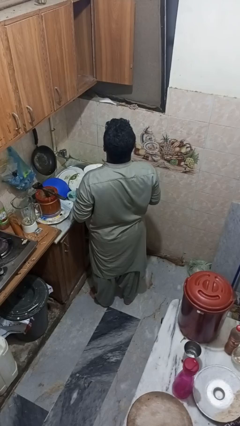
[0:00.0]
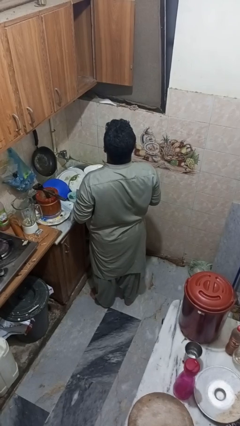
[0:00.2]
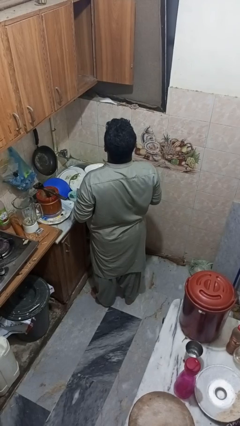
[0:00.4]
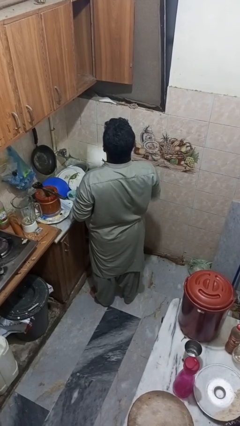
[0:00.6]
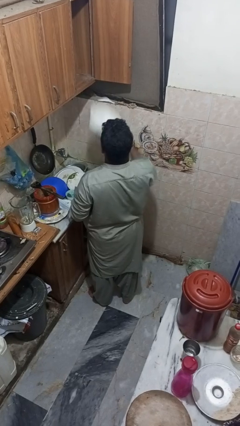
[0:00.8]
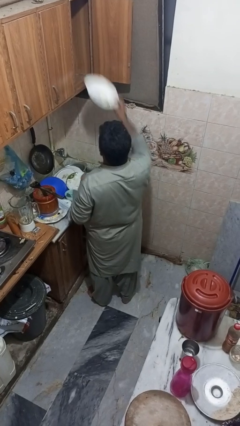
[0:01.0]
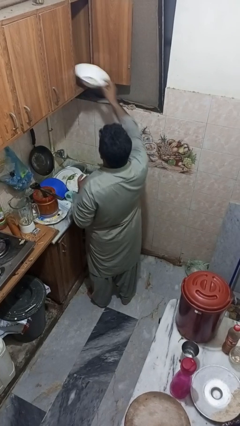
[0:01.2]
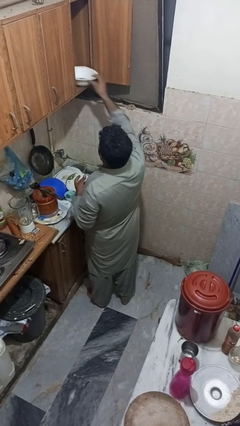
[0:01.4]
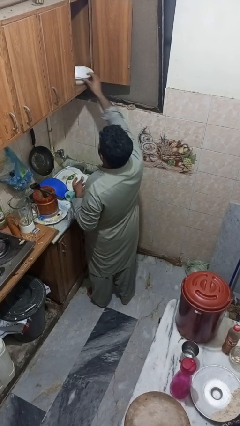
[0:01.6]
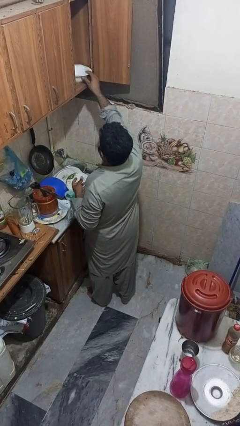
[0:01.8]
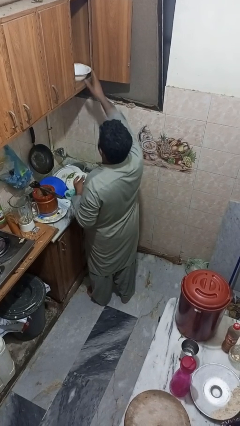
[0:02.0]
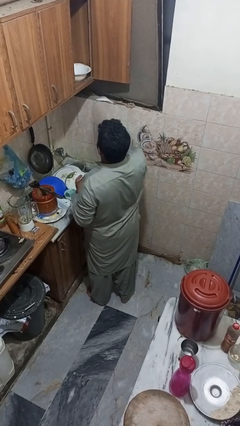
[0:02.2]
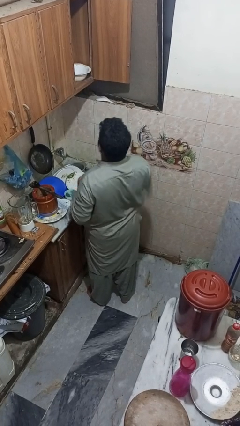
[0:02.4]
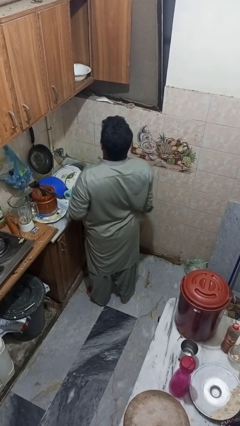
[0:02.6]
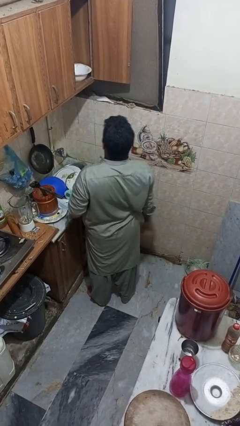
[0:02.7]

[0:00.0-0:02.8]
person puts object in cabinet

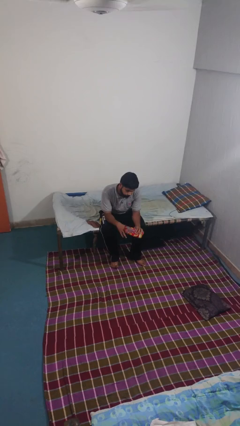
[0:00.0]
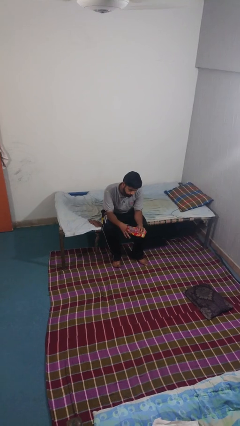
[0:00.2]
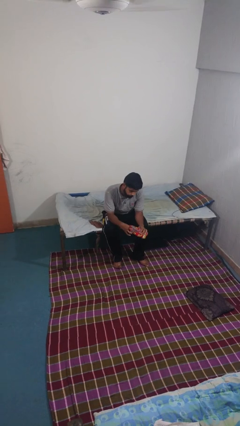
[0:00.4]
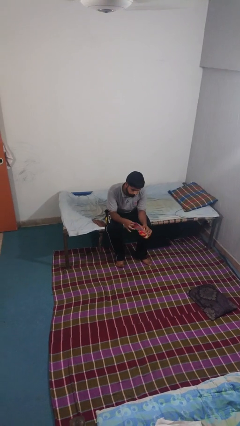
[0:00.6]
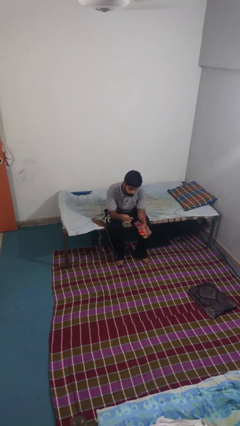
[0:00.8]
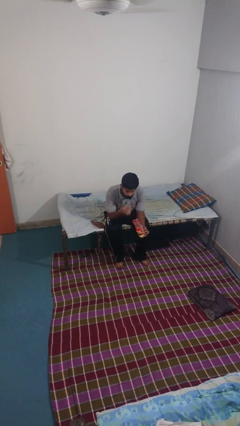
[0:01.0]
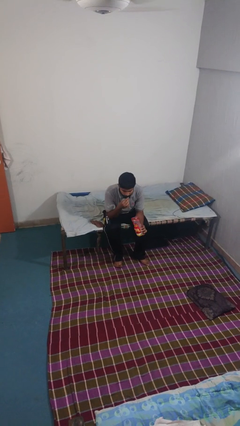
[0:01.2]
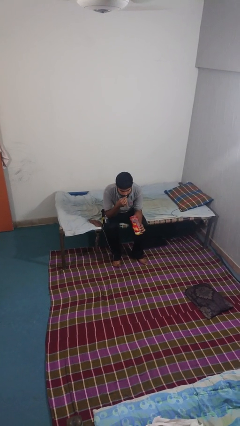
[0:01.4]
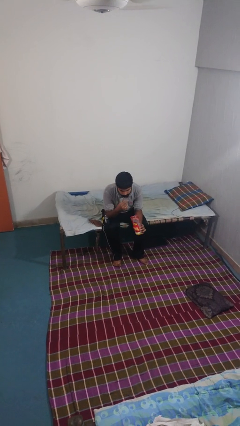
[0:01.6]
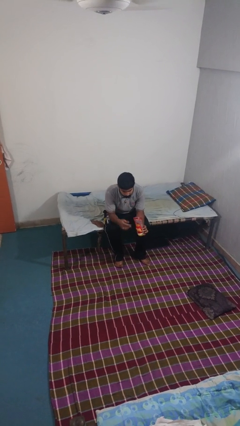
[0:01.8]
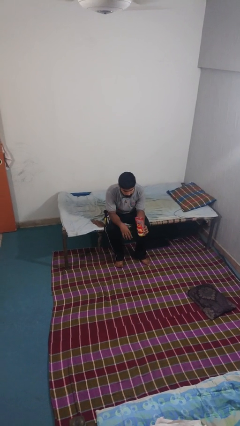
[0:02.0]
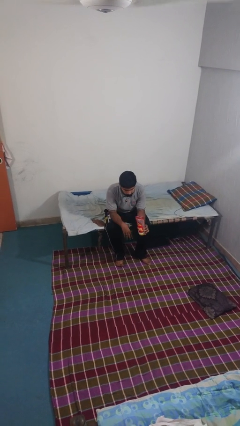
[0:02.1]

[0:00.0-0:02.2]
person eats snack from bag

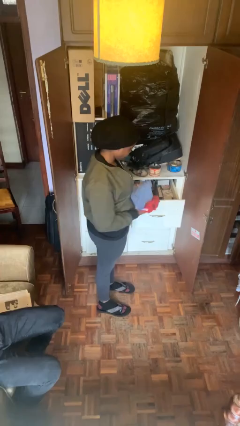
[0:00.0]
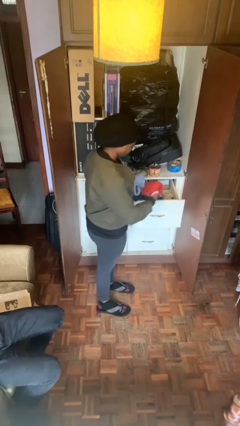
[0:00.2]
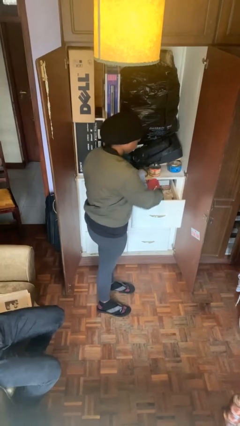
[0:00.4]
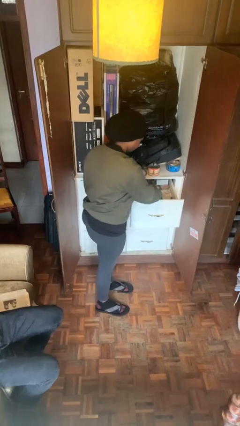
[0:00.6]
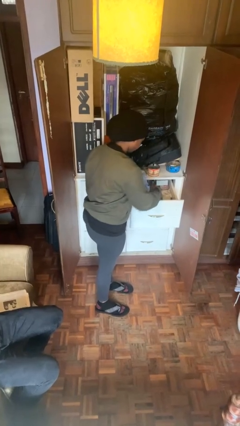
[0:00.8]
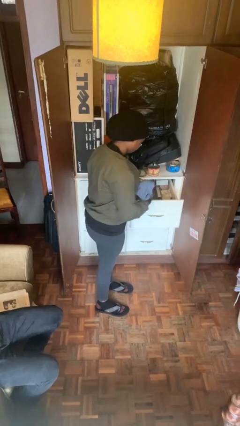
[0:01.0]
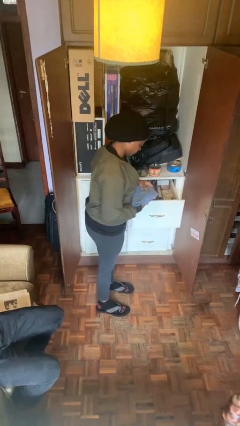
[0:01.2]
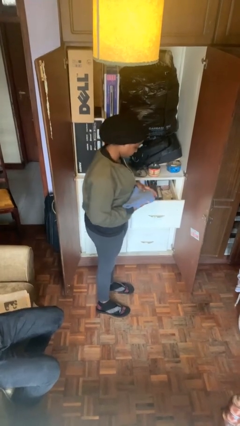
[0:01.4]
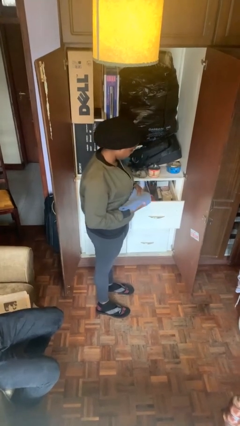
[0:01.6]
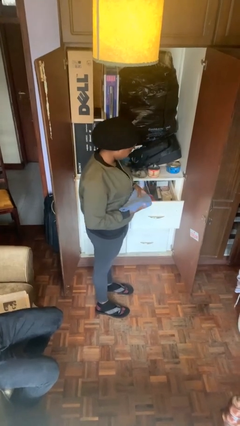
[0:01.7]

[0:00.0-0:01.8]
person puts clothes into dresser

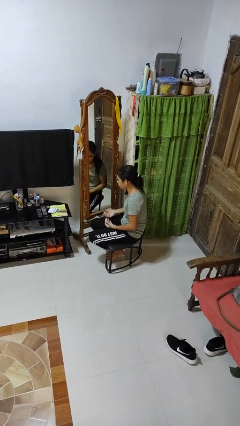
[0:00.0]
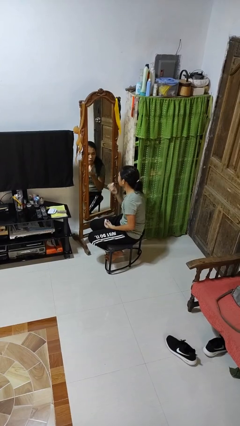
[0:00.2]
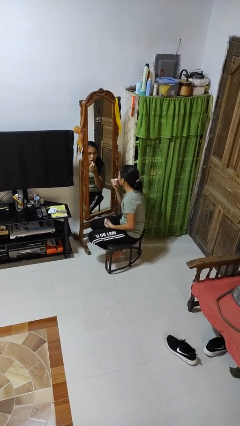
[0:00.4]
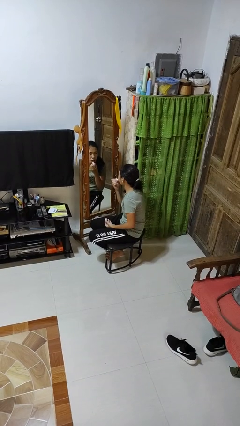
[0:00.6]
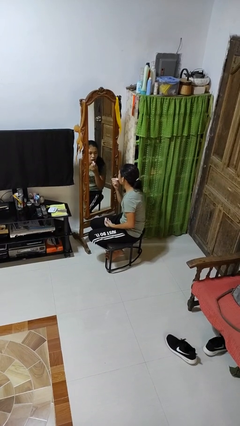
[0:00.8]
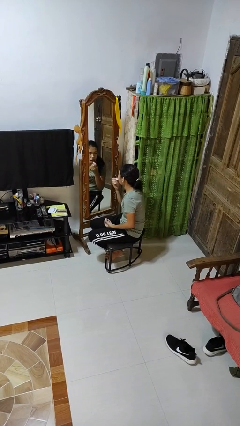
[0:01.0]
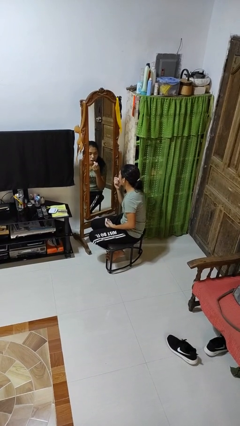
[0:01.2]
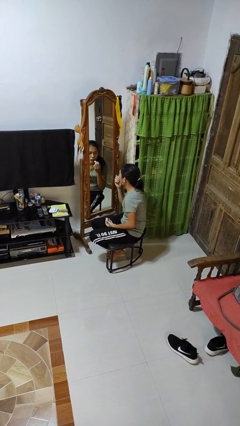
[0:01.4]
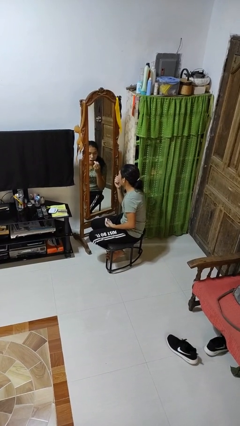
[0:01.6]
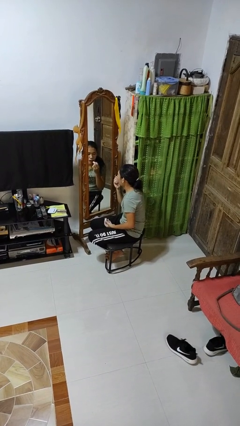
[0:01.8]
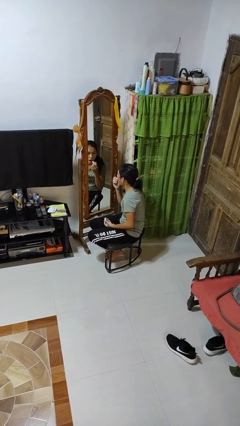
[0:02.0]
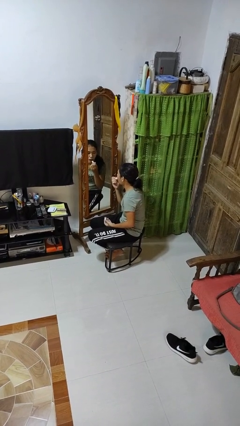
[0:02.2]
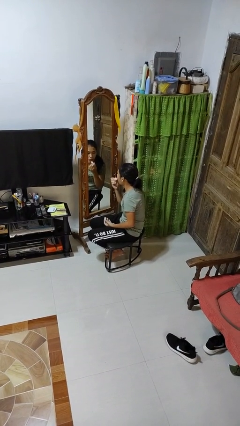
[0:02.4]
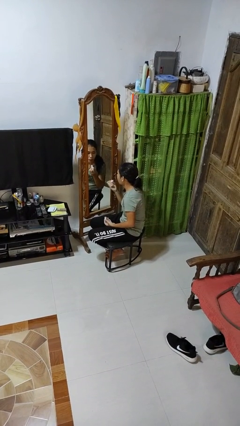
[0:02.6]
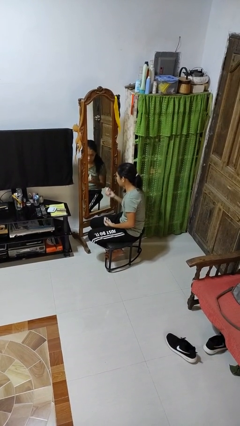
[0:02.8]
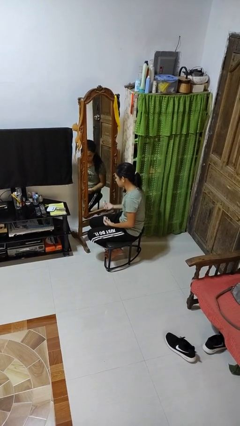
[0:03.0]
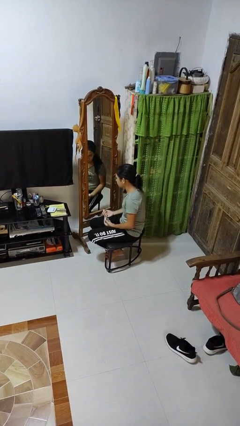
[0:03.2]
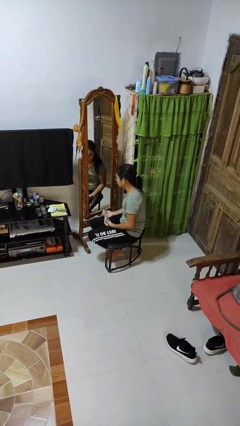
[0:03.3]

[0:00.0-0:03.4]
person applies lip makeup

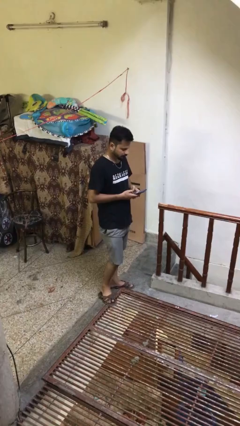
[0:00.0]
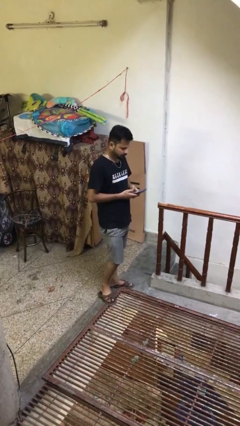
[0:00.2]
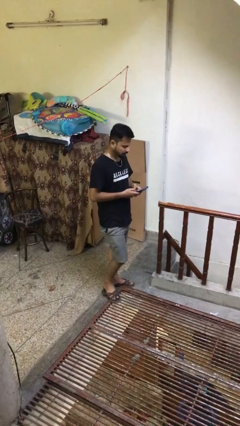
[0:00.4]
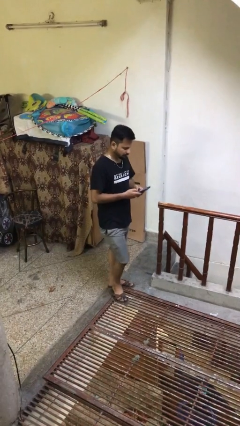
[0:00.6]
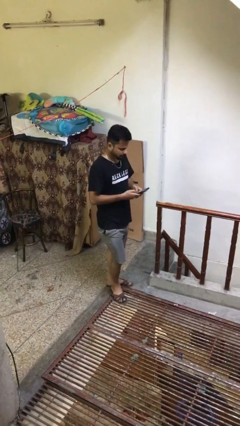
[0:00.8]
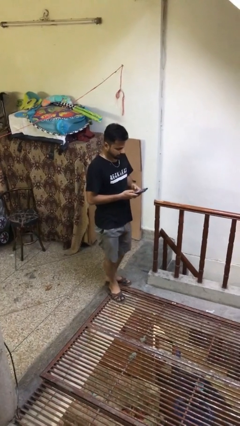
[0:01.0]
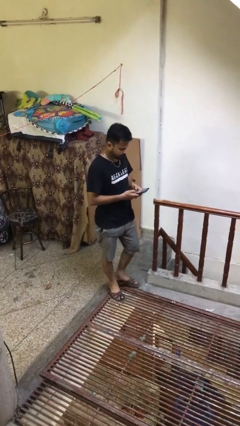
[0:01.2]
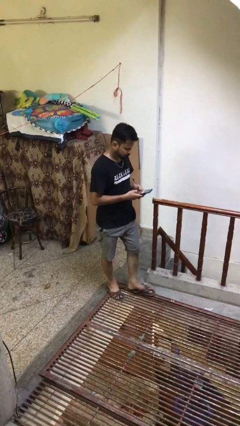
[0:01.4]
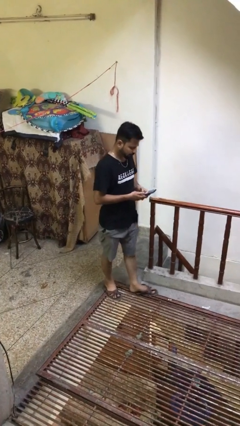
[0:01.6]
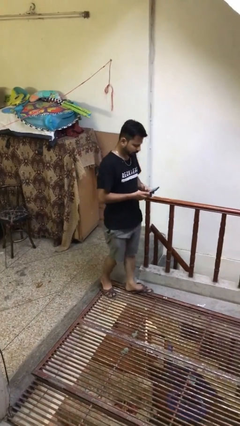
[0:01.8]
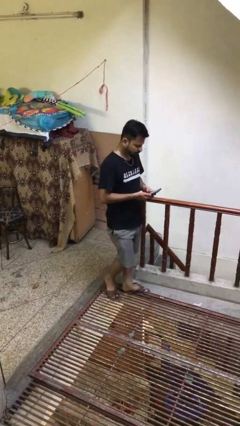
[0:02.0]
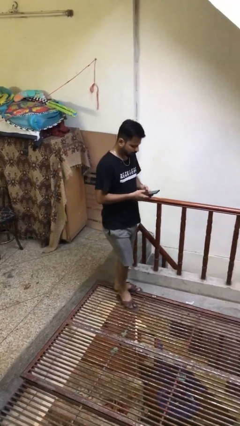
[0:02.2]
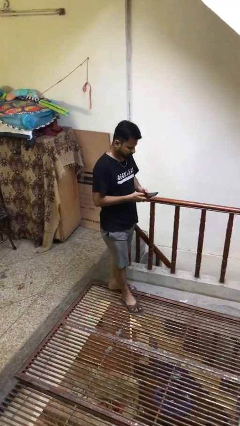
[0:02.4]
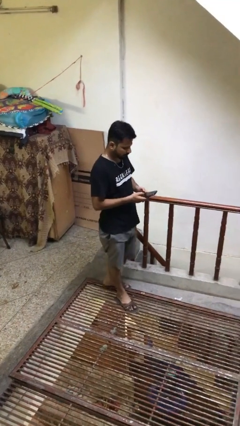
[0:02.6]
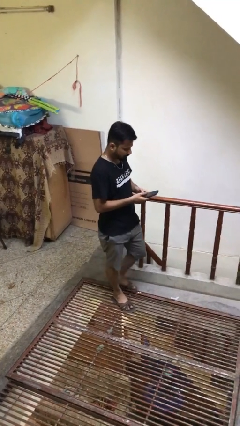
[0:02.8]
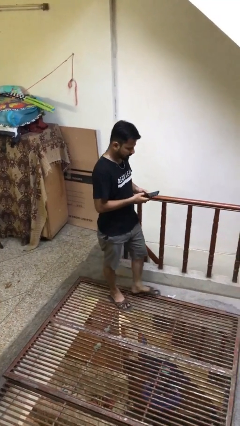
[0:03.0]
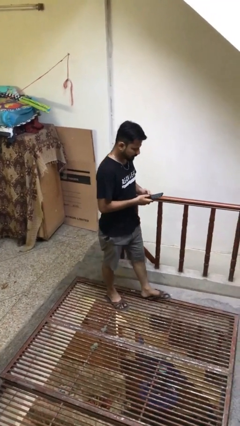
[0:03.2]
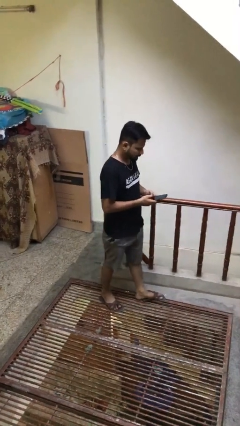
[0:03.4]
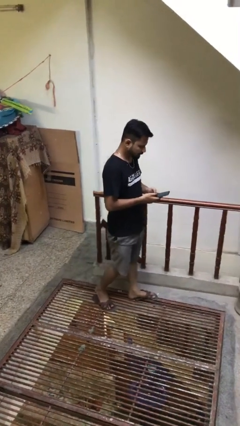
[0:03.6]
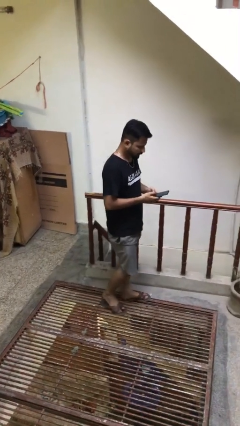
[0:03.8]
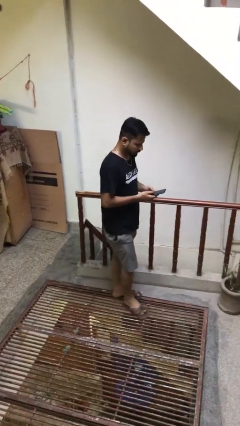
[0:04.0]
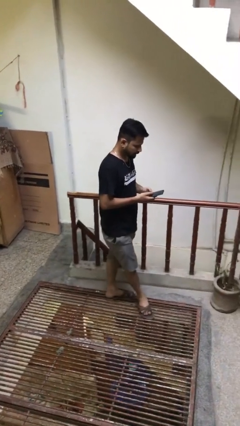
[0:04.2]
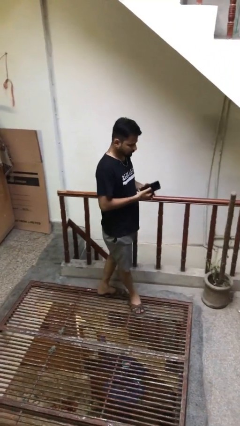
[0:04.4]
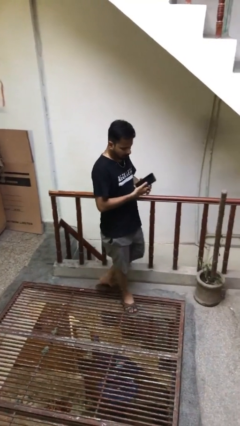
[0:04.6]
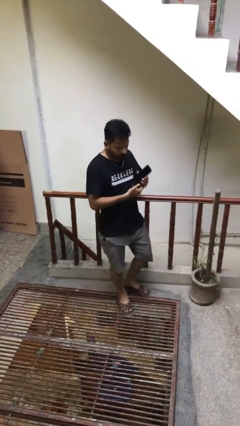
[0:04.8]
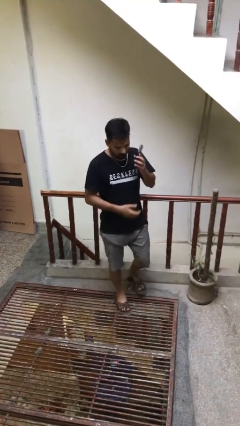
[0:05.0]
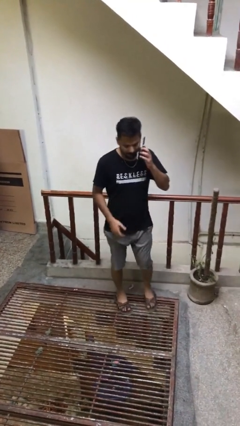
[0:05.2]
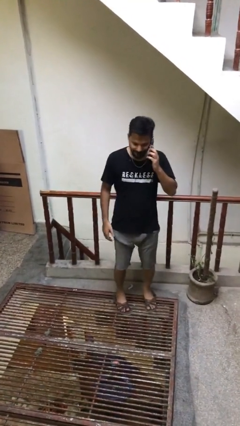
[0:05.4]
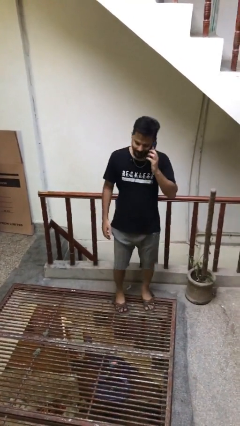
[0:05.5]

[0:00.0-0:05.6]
person texts on phone

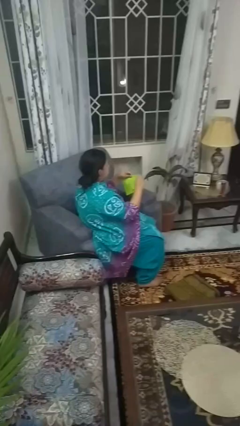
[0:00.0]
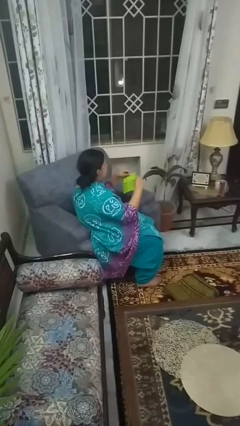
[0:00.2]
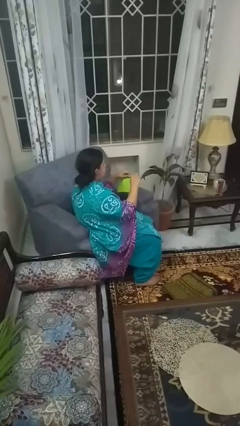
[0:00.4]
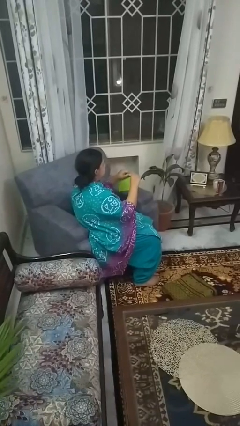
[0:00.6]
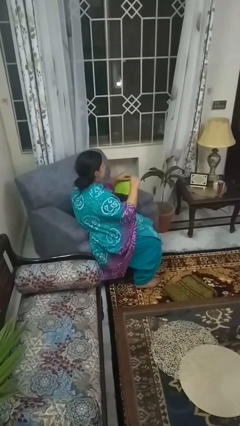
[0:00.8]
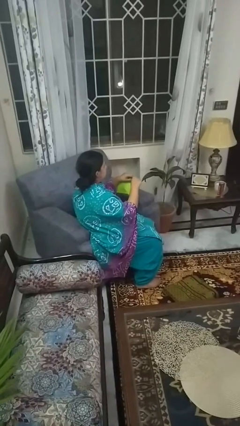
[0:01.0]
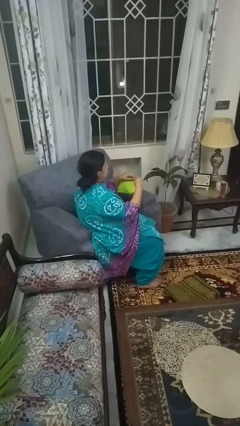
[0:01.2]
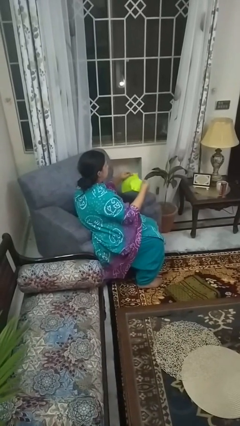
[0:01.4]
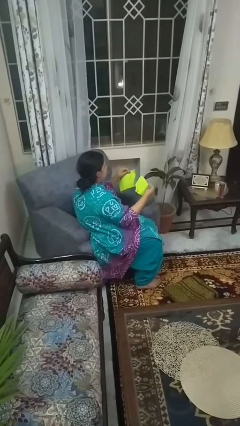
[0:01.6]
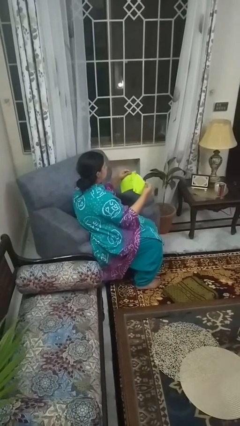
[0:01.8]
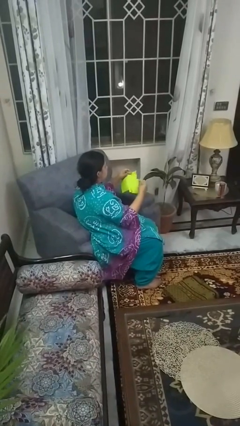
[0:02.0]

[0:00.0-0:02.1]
person tears paper
